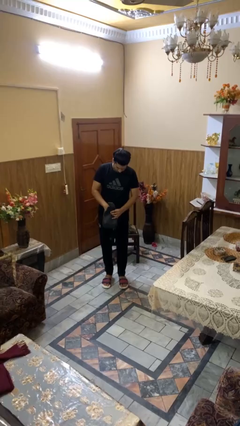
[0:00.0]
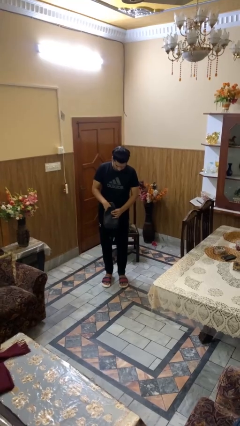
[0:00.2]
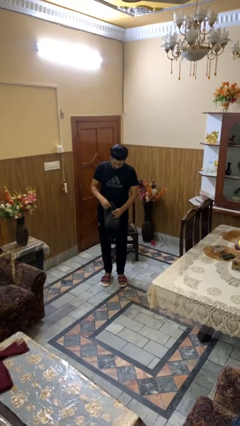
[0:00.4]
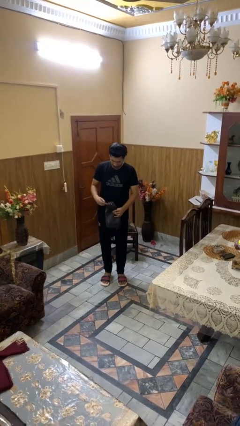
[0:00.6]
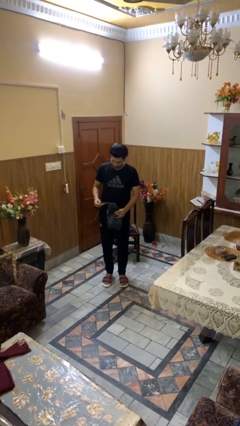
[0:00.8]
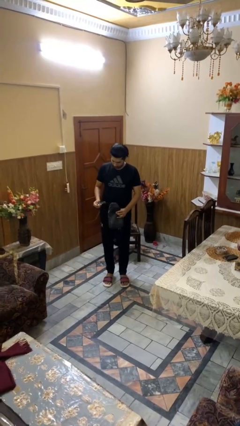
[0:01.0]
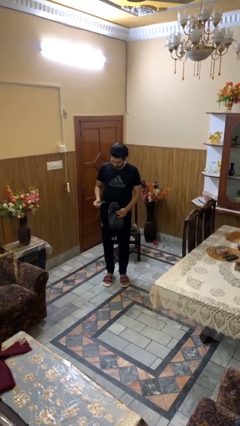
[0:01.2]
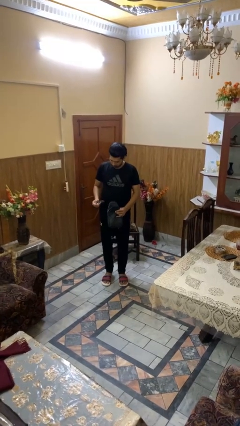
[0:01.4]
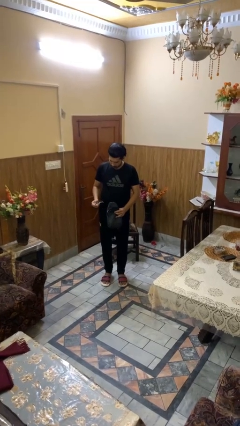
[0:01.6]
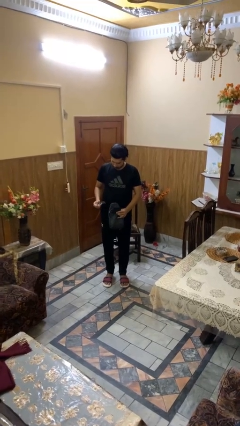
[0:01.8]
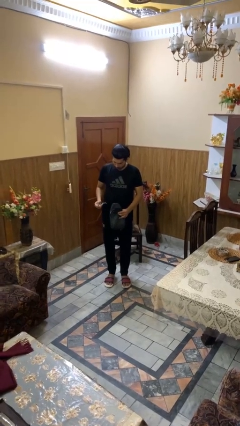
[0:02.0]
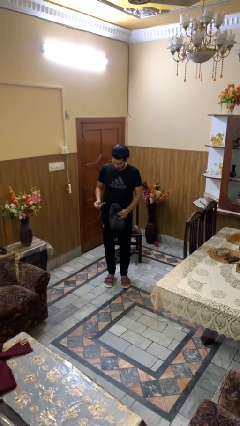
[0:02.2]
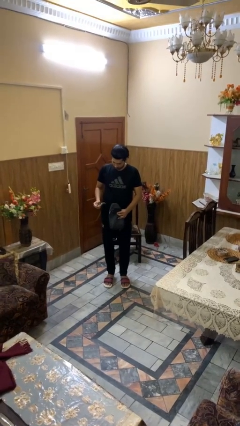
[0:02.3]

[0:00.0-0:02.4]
person takes object from purse

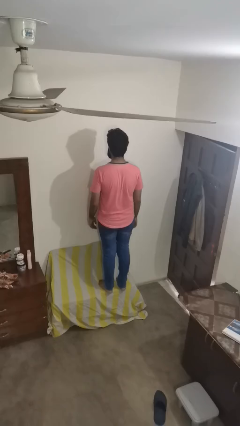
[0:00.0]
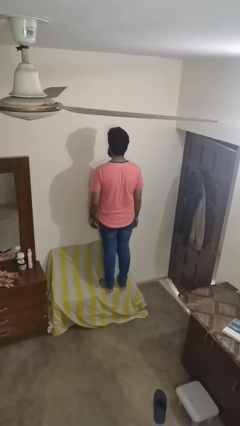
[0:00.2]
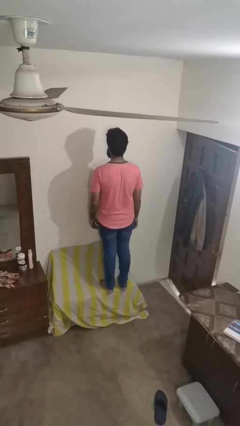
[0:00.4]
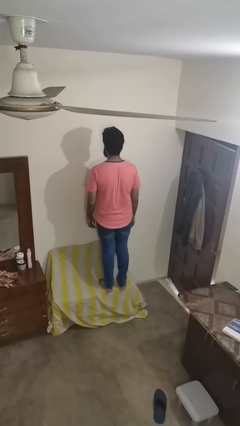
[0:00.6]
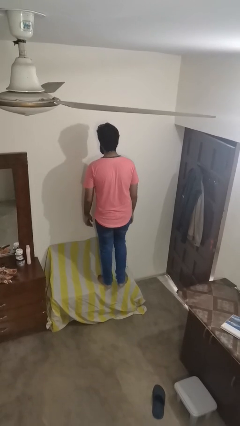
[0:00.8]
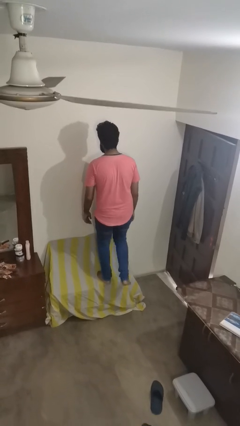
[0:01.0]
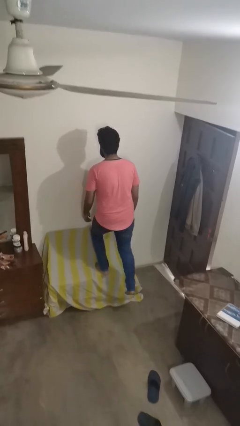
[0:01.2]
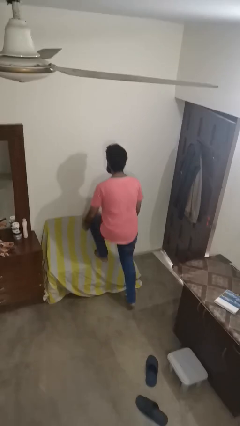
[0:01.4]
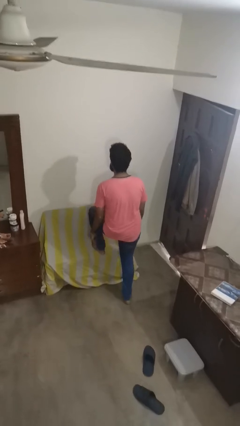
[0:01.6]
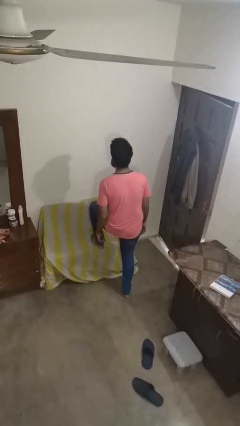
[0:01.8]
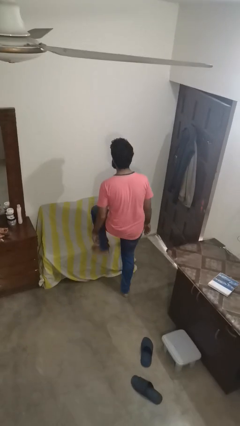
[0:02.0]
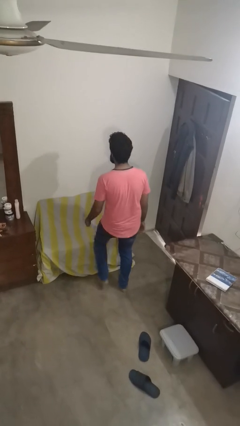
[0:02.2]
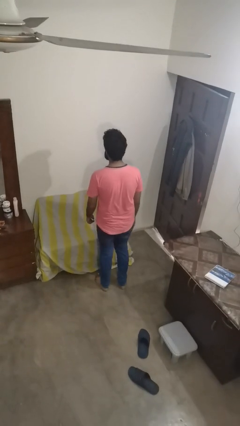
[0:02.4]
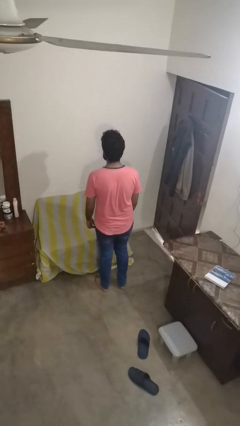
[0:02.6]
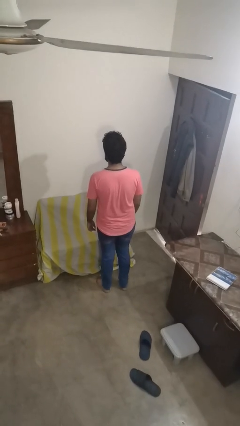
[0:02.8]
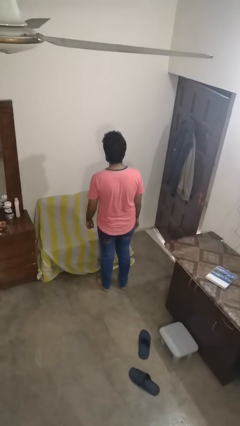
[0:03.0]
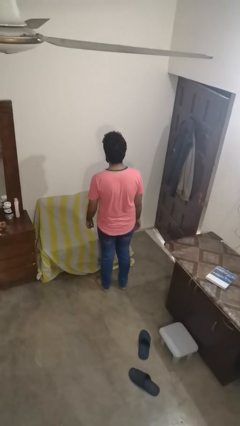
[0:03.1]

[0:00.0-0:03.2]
person climbs off couch

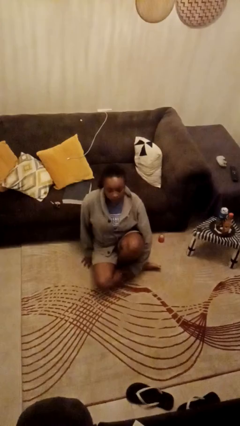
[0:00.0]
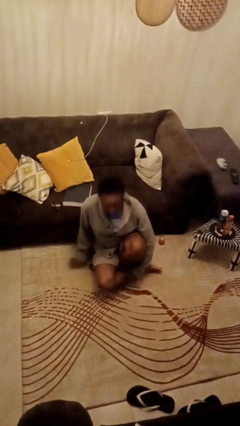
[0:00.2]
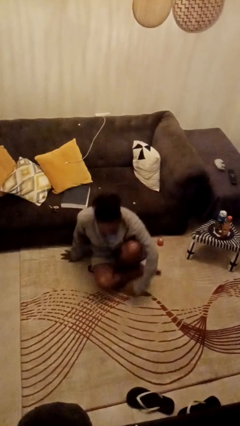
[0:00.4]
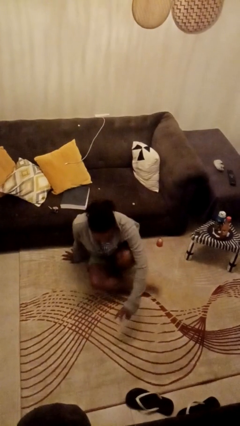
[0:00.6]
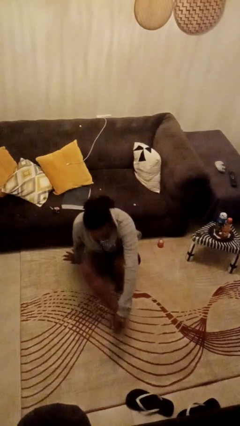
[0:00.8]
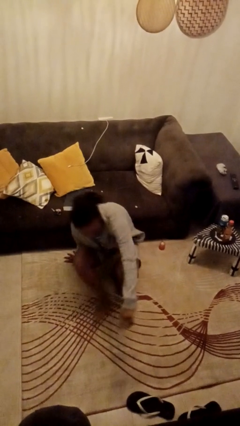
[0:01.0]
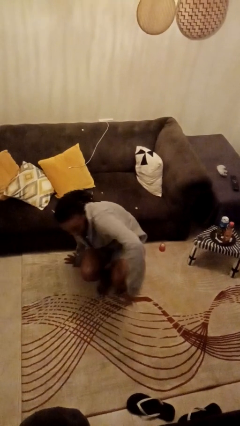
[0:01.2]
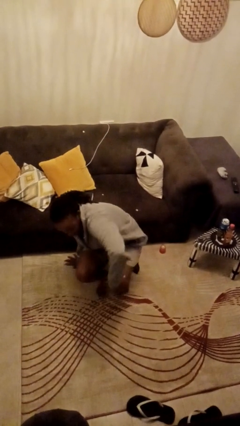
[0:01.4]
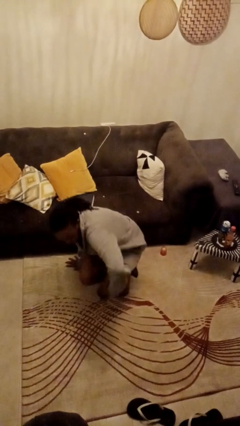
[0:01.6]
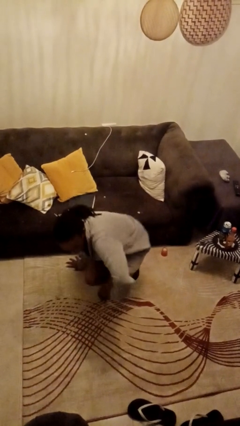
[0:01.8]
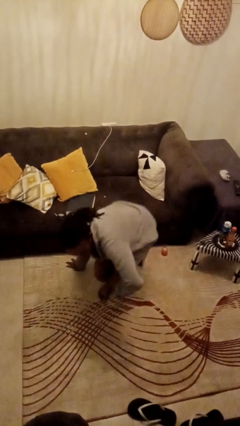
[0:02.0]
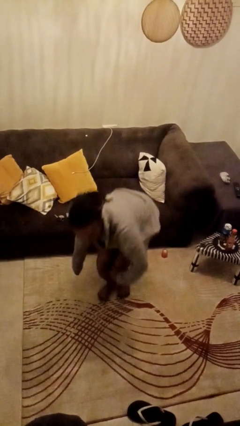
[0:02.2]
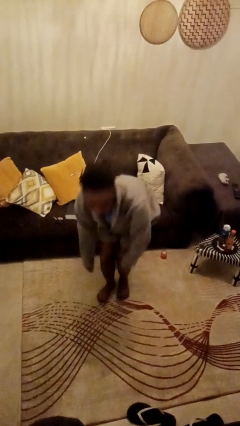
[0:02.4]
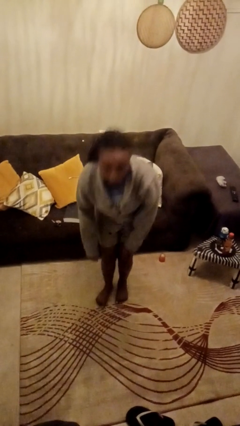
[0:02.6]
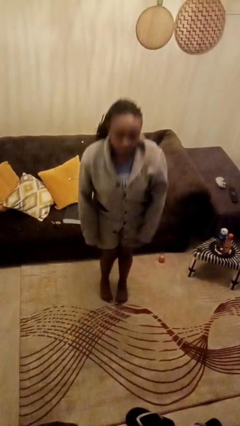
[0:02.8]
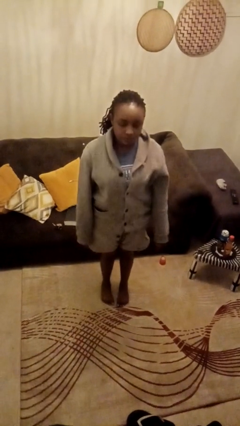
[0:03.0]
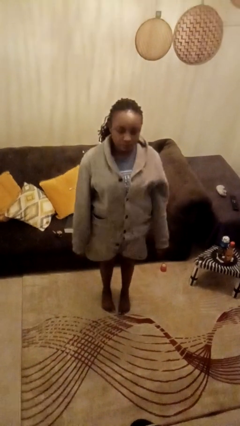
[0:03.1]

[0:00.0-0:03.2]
person stands up from floor

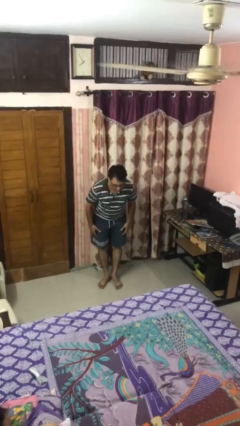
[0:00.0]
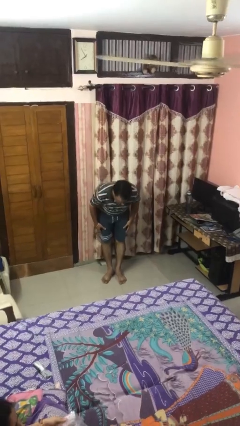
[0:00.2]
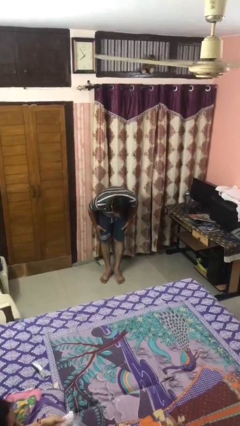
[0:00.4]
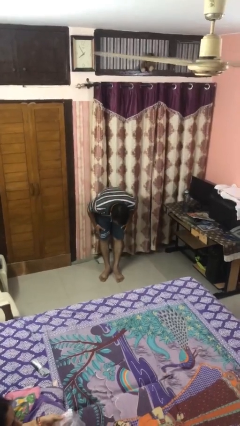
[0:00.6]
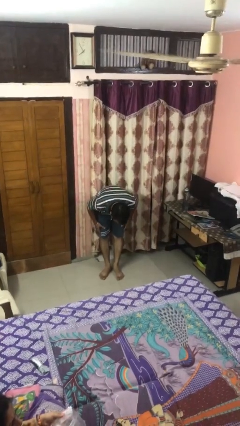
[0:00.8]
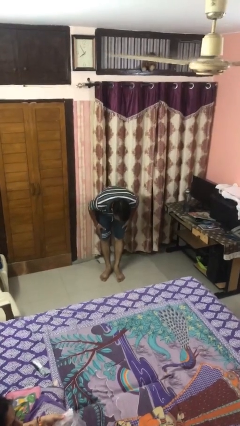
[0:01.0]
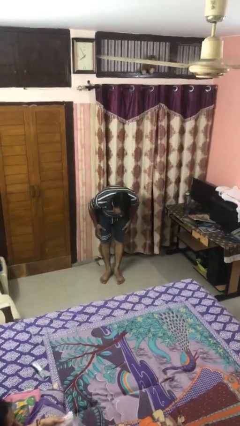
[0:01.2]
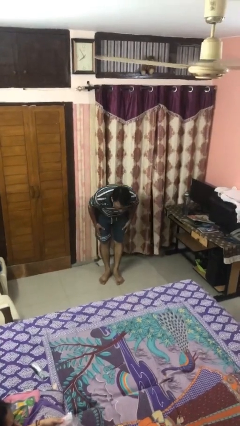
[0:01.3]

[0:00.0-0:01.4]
person bows

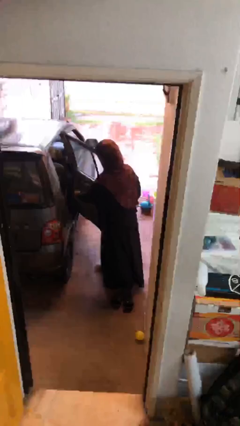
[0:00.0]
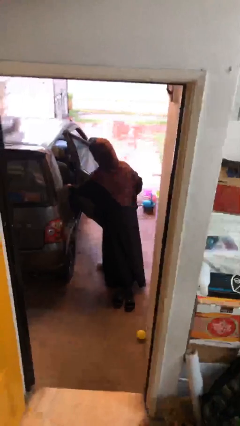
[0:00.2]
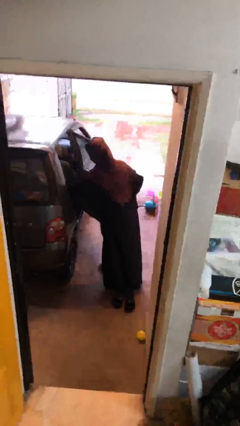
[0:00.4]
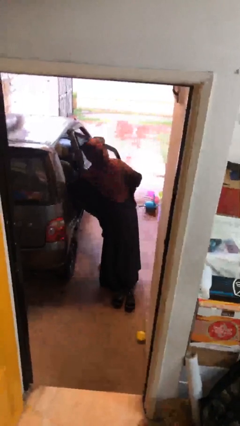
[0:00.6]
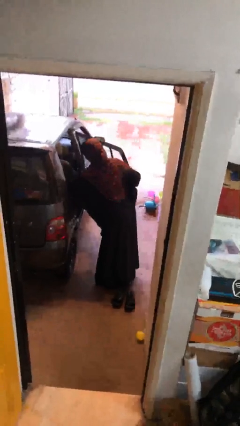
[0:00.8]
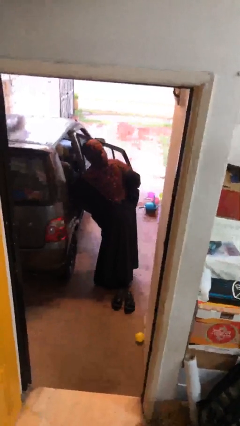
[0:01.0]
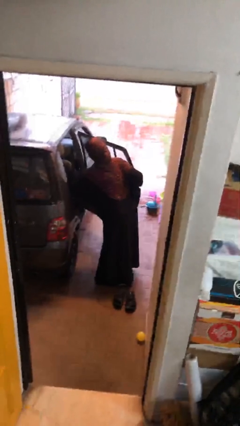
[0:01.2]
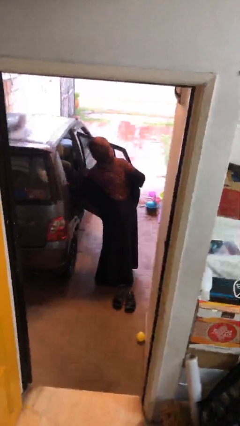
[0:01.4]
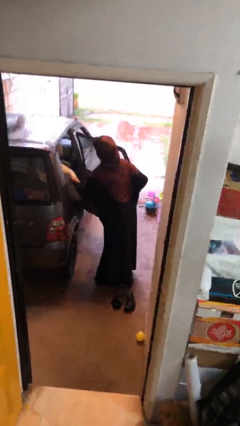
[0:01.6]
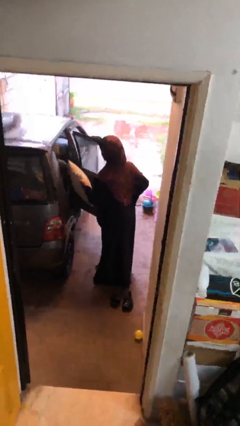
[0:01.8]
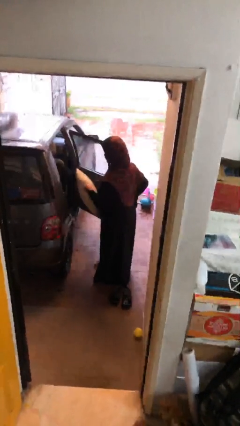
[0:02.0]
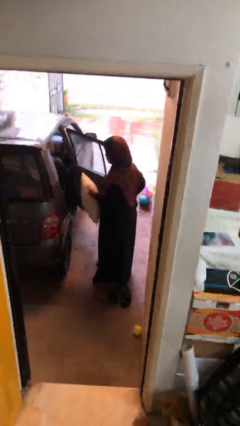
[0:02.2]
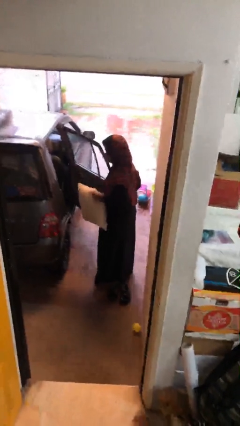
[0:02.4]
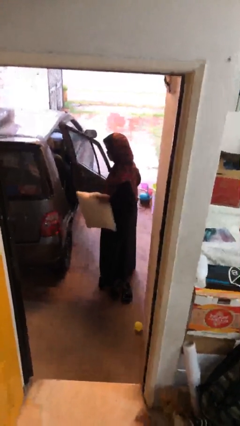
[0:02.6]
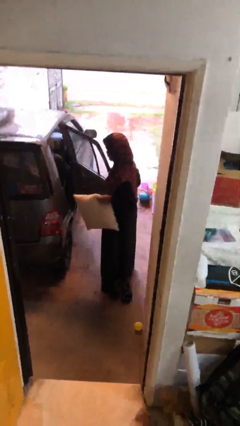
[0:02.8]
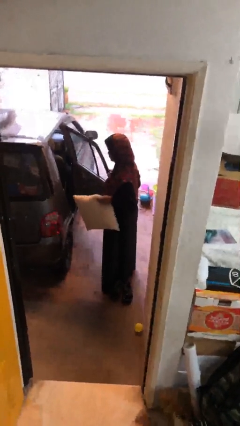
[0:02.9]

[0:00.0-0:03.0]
person unloads car

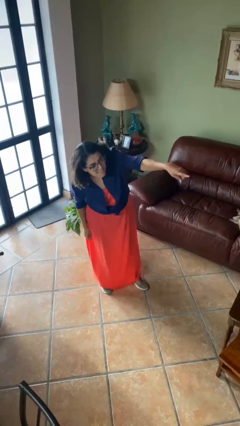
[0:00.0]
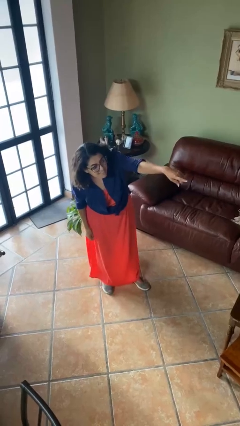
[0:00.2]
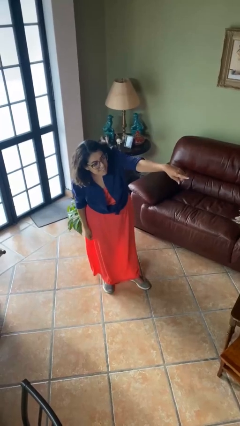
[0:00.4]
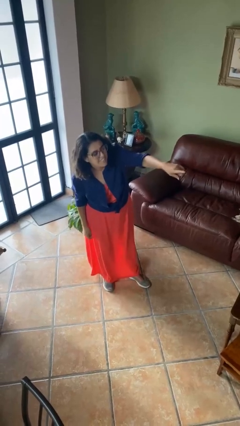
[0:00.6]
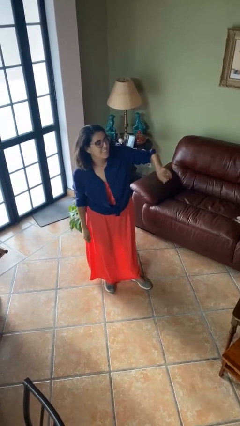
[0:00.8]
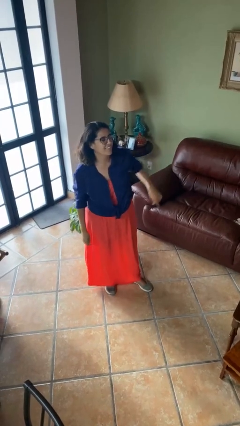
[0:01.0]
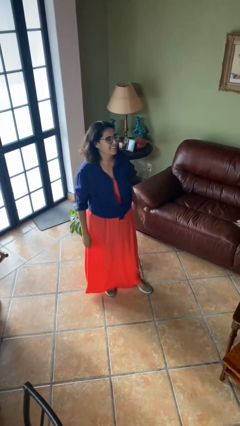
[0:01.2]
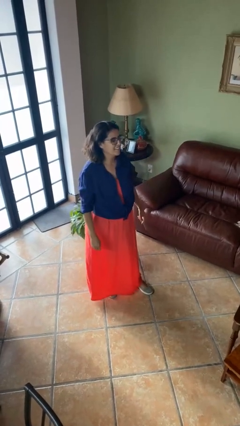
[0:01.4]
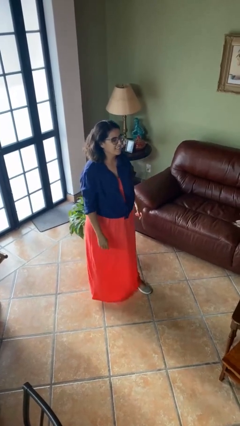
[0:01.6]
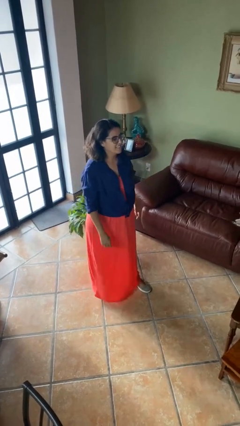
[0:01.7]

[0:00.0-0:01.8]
person points at person

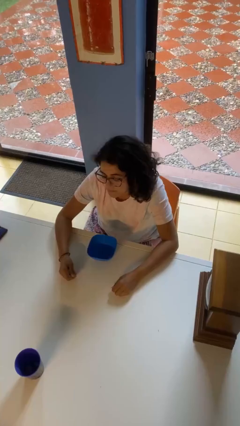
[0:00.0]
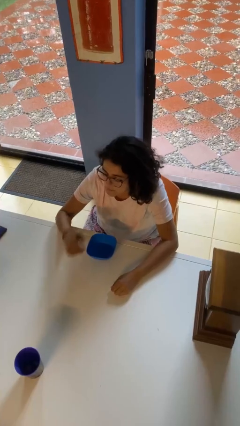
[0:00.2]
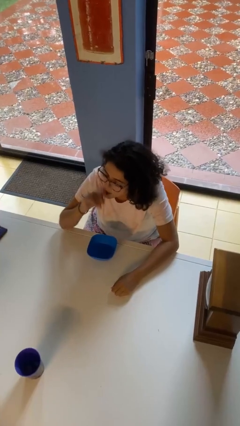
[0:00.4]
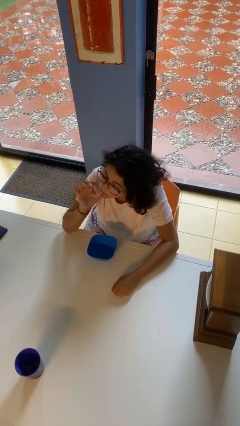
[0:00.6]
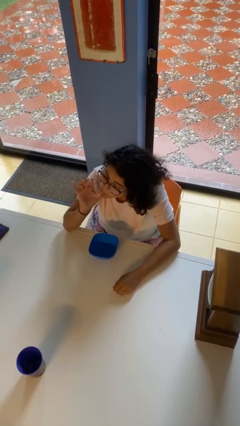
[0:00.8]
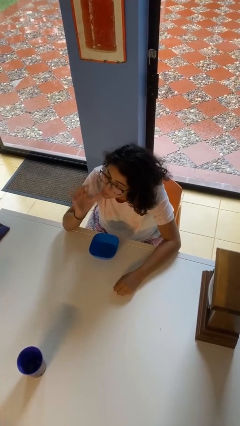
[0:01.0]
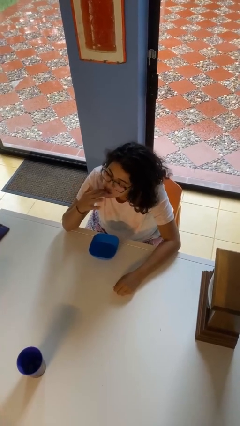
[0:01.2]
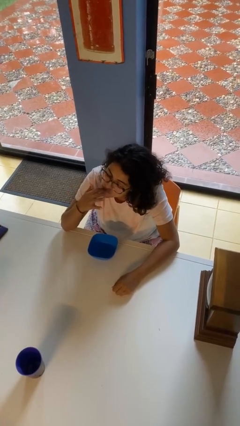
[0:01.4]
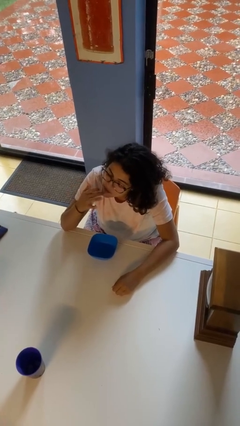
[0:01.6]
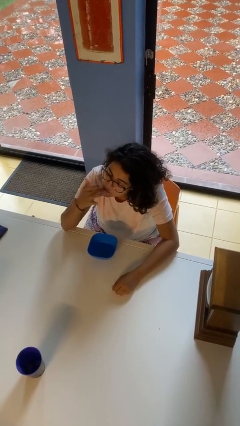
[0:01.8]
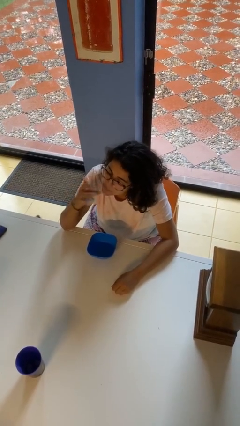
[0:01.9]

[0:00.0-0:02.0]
person licks fingers

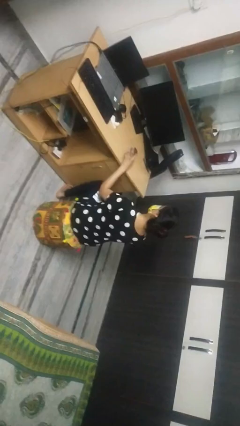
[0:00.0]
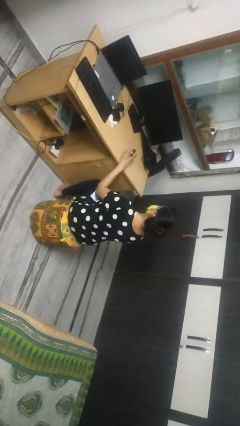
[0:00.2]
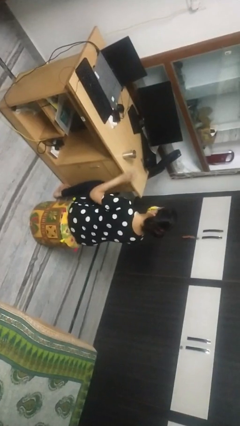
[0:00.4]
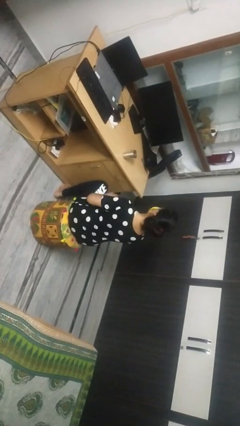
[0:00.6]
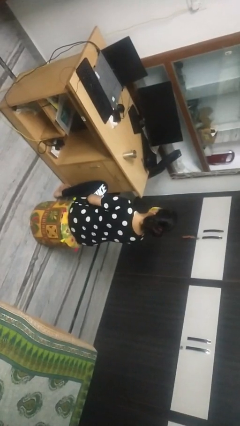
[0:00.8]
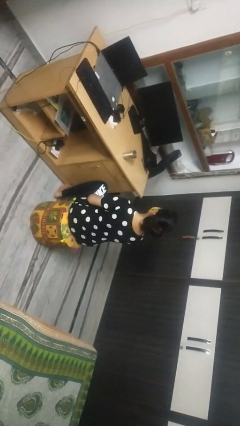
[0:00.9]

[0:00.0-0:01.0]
person sets upright glass
